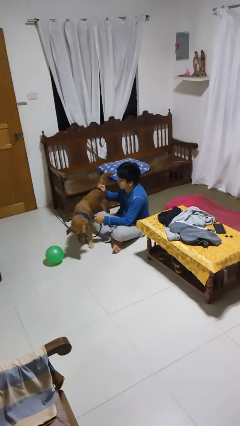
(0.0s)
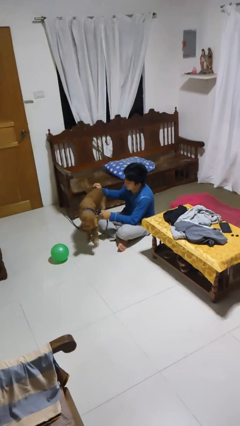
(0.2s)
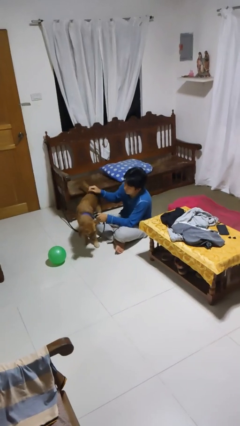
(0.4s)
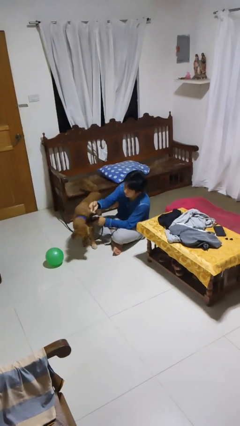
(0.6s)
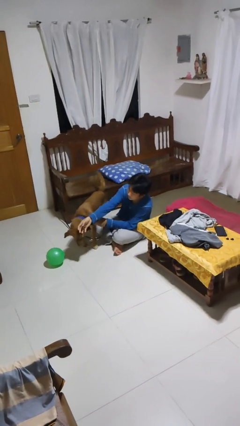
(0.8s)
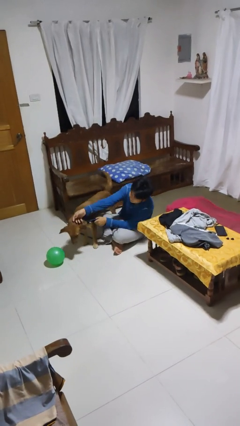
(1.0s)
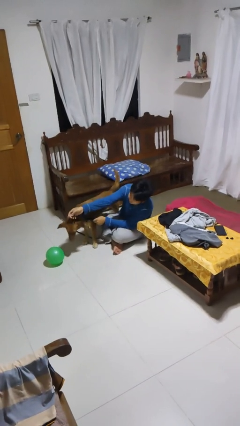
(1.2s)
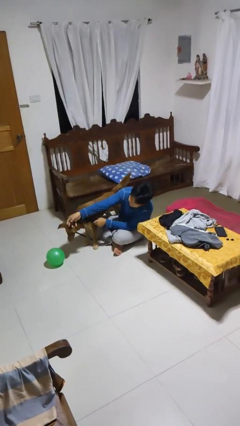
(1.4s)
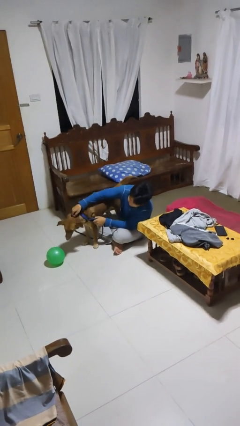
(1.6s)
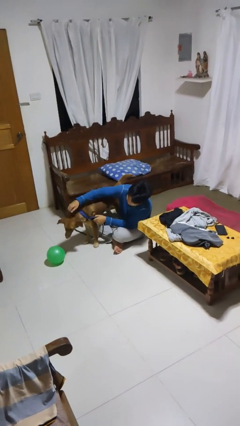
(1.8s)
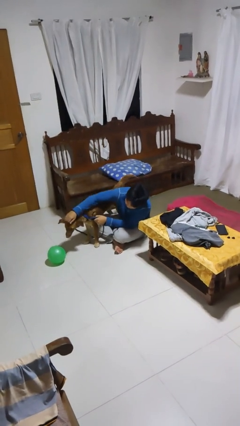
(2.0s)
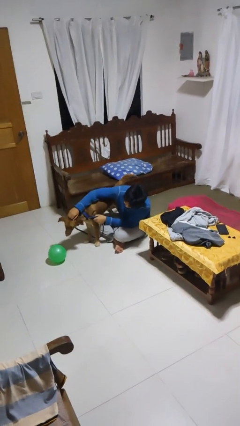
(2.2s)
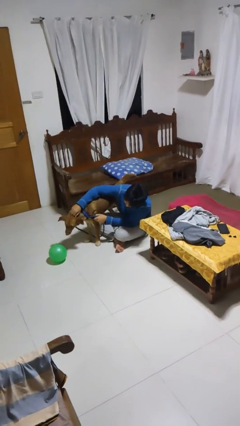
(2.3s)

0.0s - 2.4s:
person pets dog

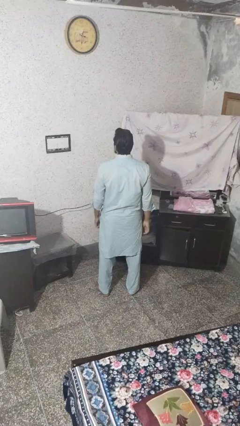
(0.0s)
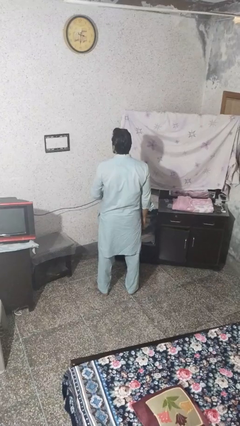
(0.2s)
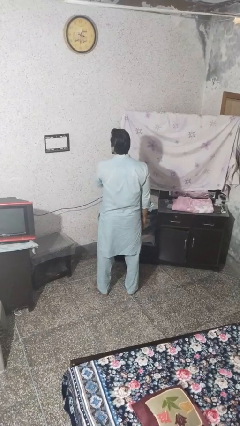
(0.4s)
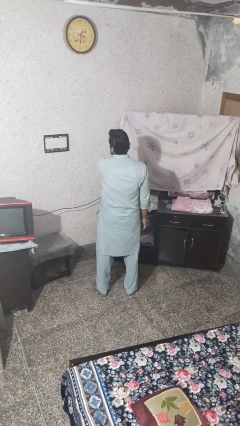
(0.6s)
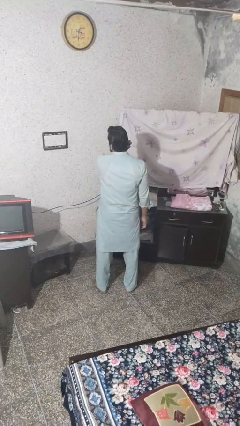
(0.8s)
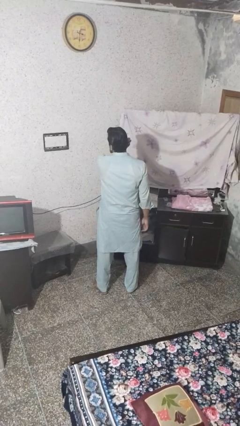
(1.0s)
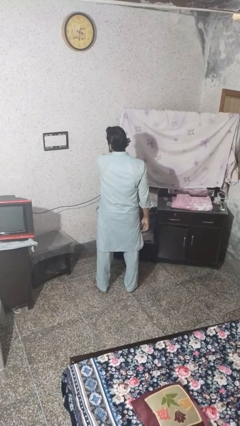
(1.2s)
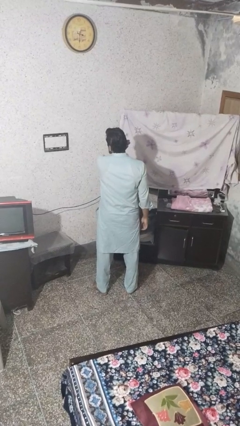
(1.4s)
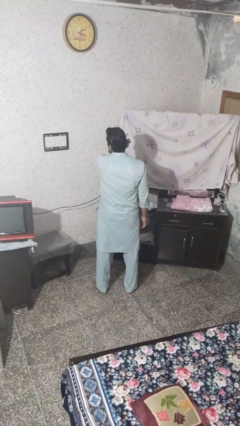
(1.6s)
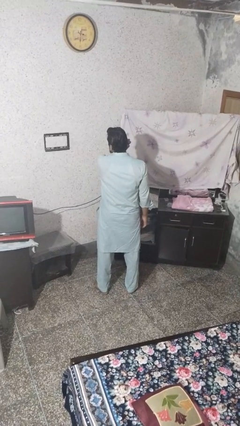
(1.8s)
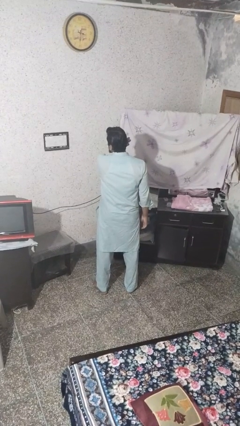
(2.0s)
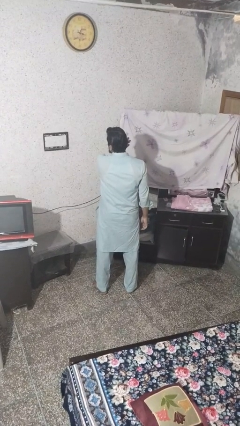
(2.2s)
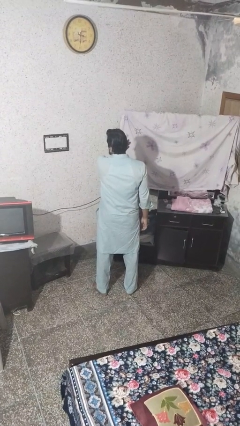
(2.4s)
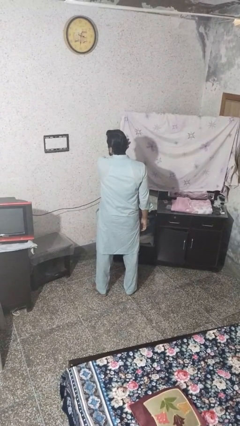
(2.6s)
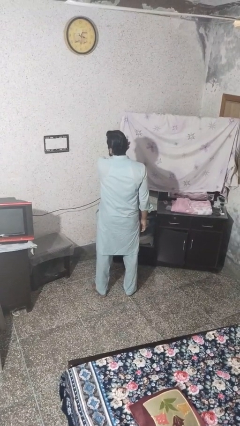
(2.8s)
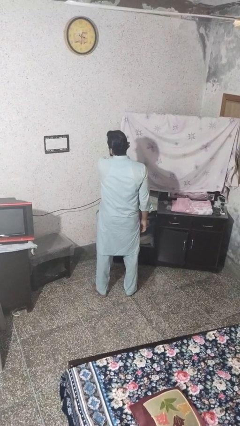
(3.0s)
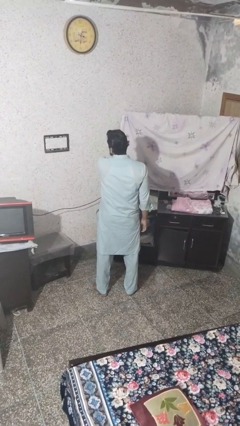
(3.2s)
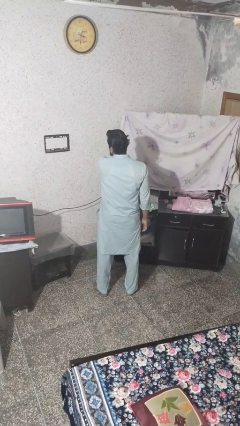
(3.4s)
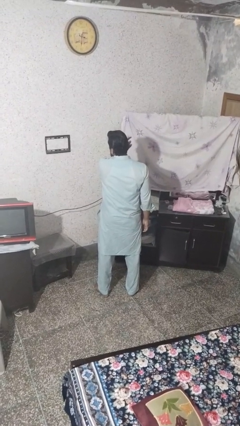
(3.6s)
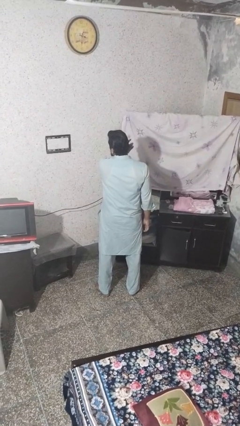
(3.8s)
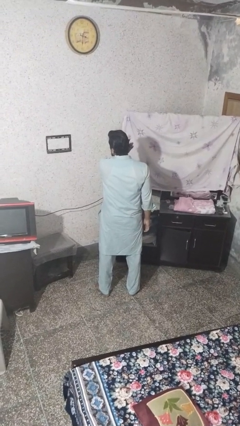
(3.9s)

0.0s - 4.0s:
person puts fingers in ear

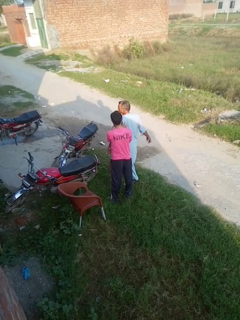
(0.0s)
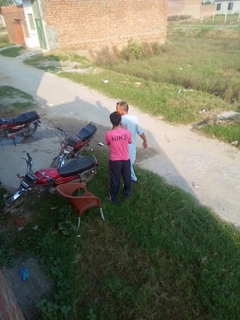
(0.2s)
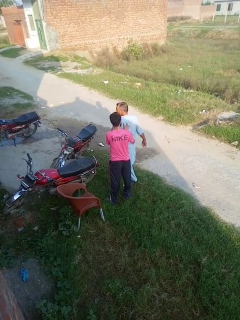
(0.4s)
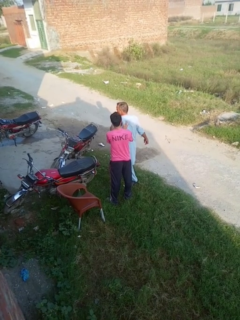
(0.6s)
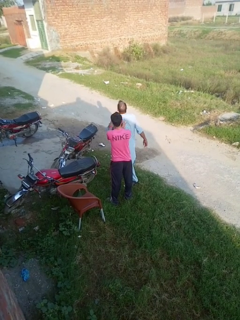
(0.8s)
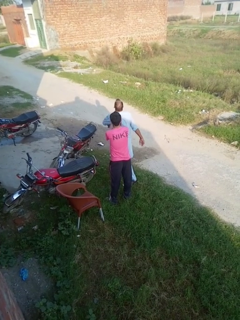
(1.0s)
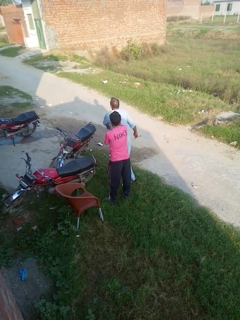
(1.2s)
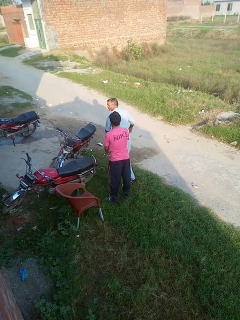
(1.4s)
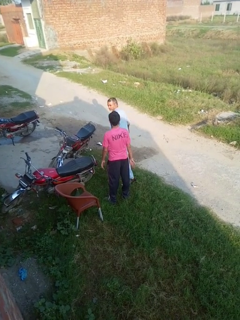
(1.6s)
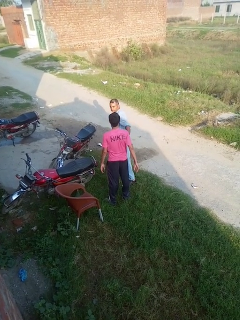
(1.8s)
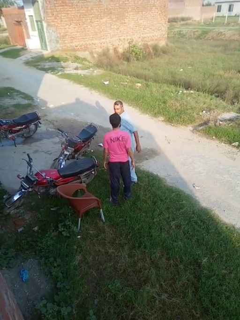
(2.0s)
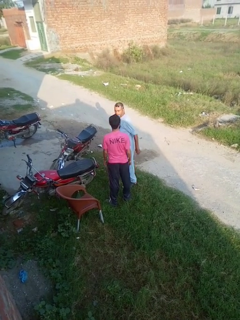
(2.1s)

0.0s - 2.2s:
person spins person around

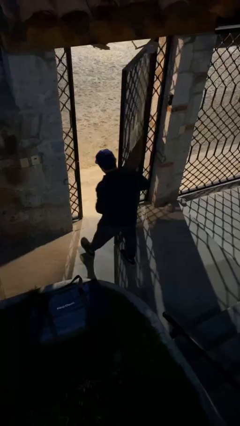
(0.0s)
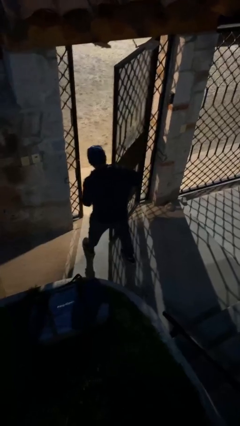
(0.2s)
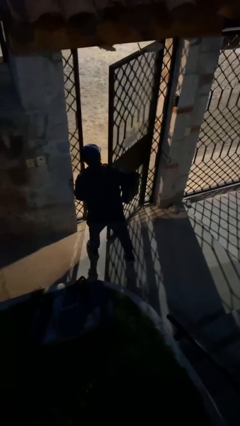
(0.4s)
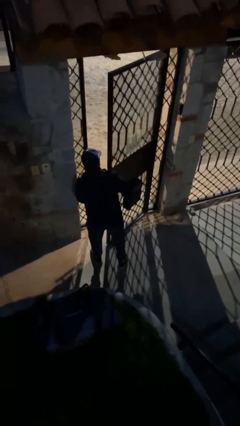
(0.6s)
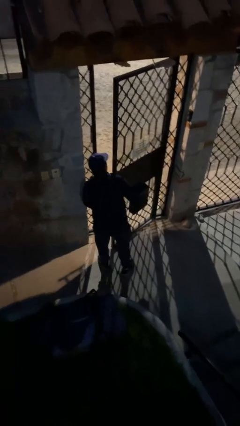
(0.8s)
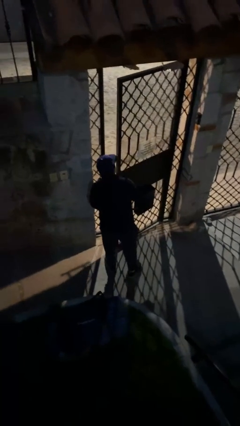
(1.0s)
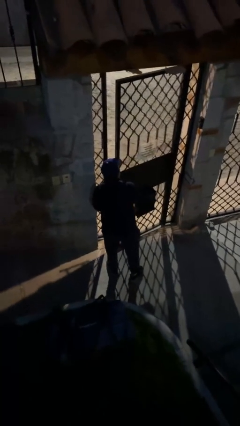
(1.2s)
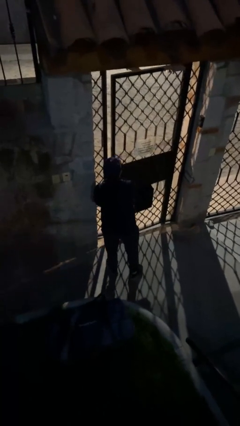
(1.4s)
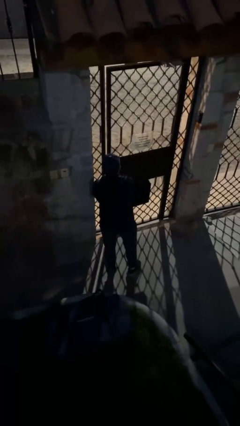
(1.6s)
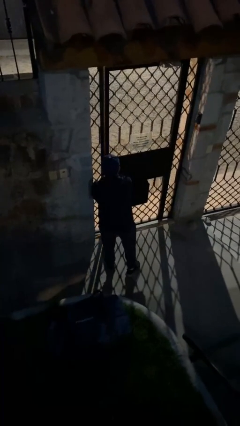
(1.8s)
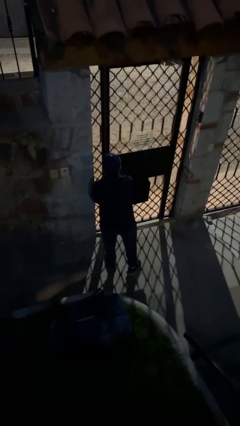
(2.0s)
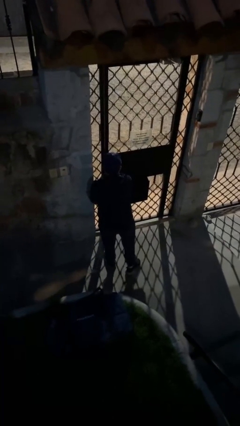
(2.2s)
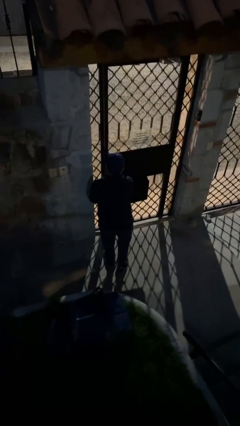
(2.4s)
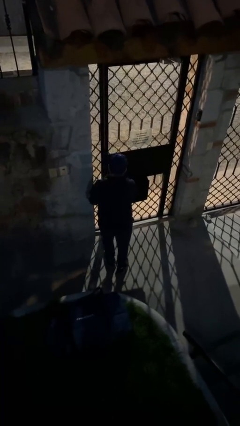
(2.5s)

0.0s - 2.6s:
person closes facility door

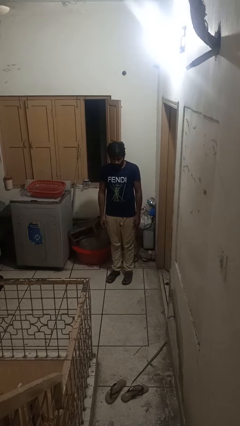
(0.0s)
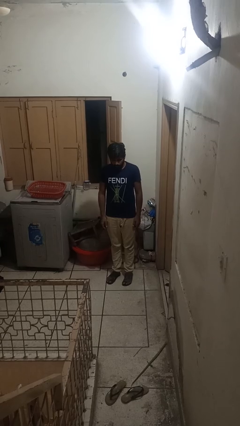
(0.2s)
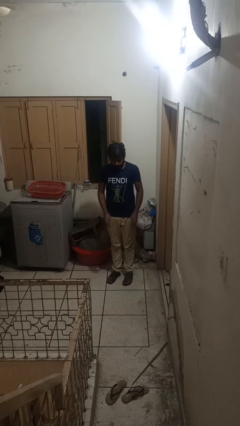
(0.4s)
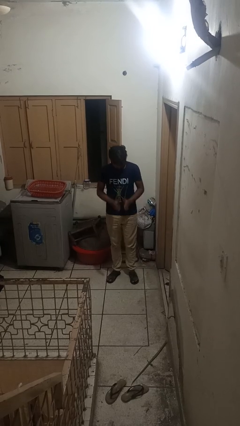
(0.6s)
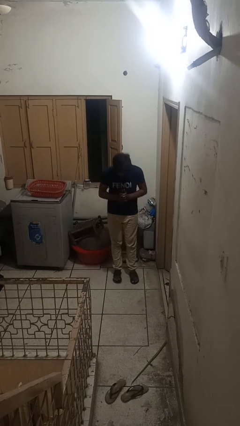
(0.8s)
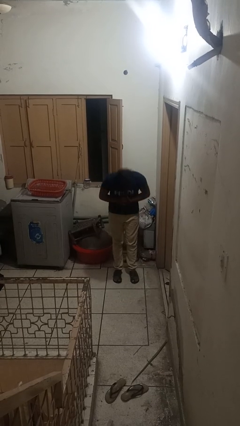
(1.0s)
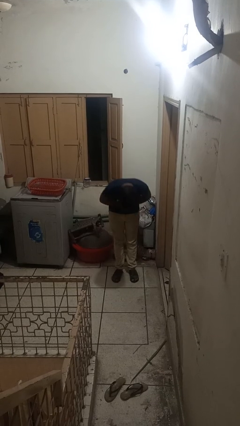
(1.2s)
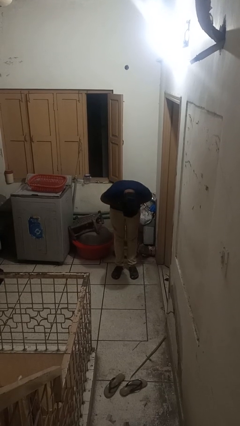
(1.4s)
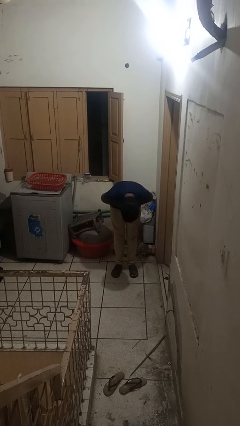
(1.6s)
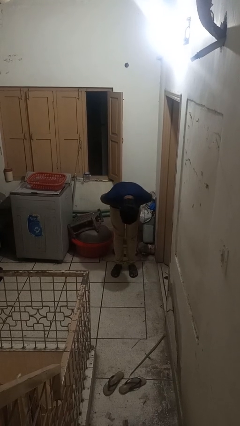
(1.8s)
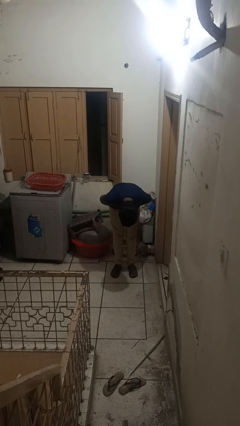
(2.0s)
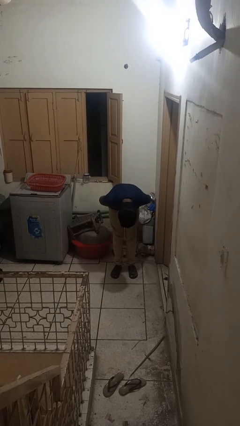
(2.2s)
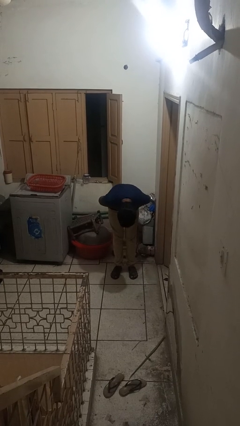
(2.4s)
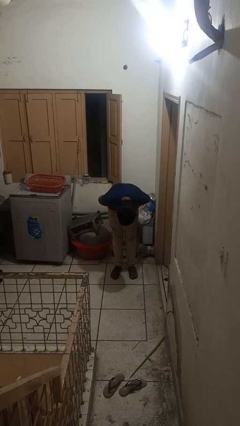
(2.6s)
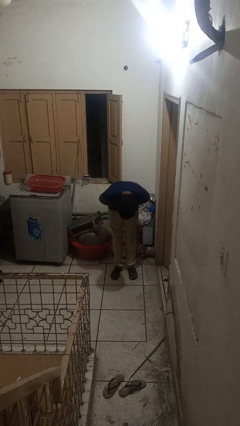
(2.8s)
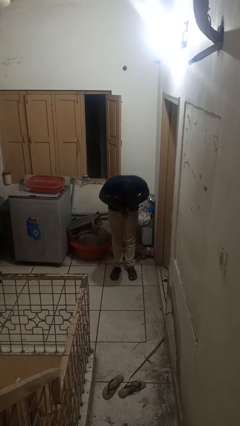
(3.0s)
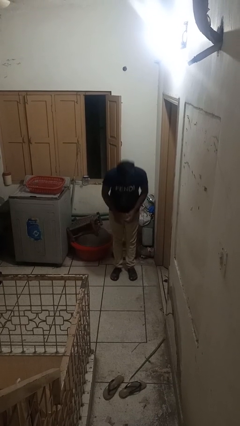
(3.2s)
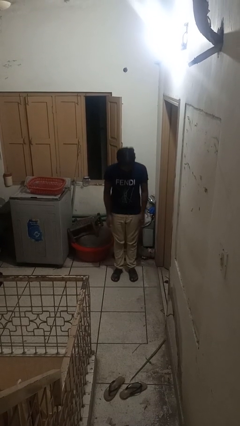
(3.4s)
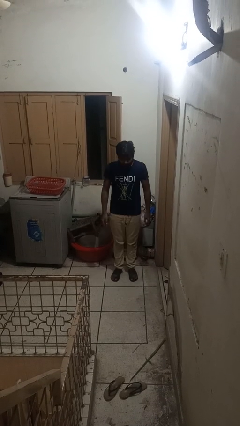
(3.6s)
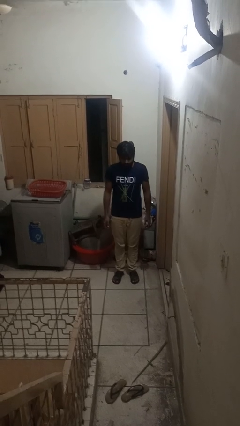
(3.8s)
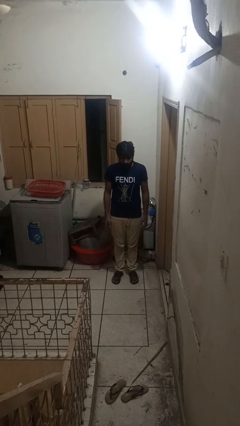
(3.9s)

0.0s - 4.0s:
person bows

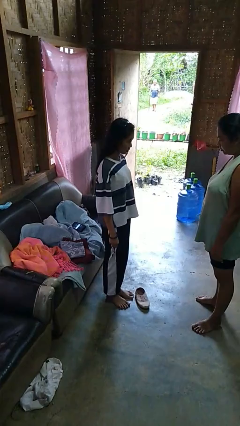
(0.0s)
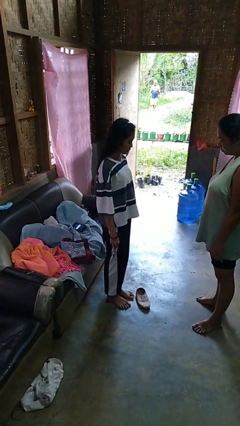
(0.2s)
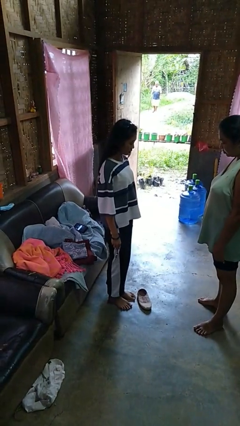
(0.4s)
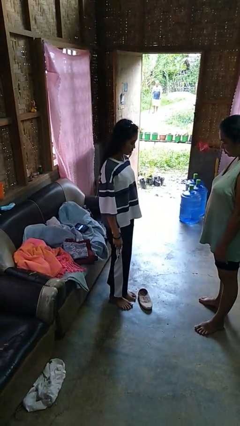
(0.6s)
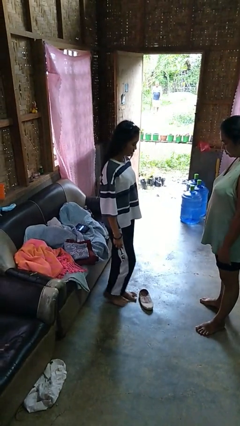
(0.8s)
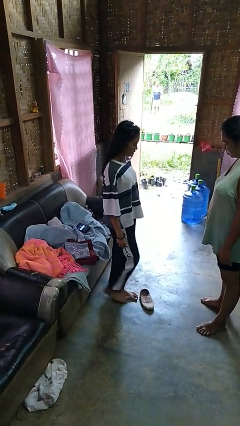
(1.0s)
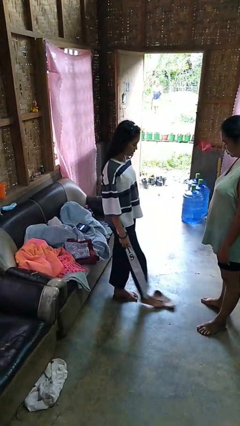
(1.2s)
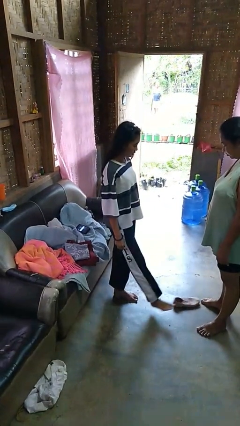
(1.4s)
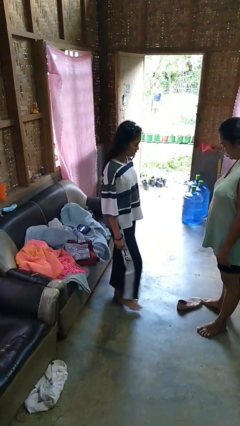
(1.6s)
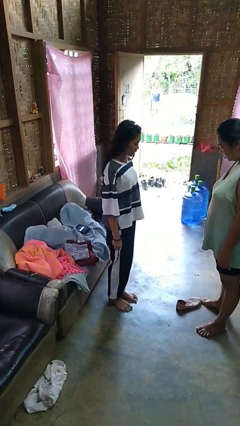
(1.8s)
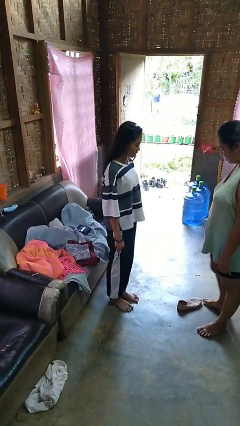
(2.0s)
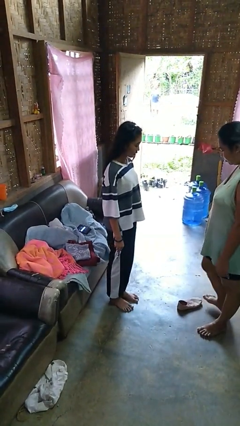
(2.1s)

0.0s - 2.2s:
person kicks object to person

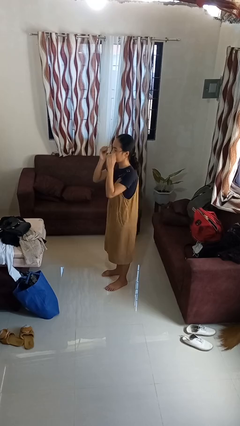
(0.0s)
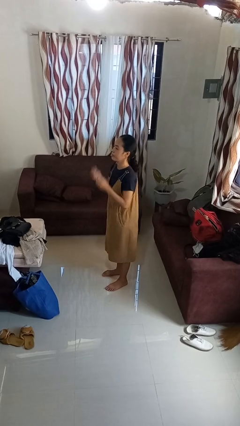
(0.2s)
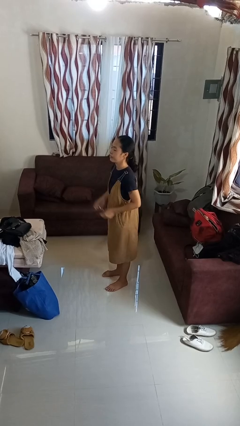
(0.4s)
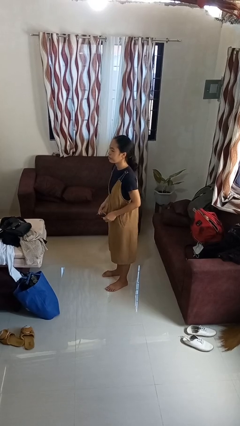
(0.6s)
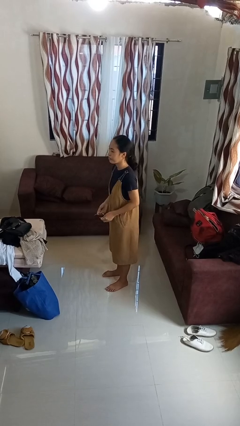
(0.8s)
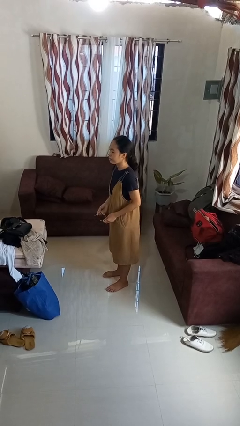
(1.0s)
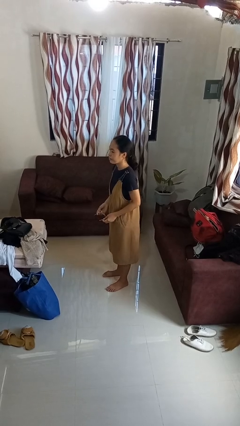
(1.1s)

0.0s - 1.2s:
person takes off glasses
